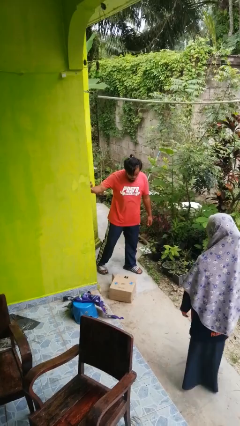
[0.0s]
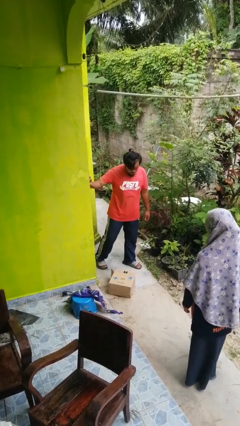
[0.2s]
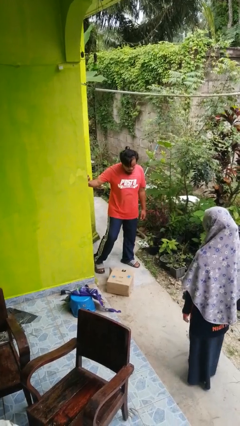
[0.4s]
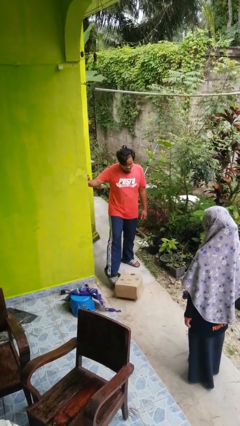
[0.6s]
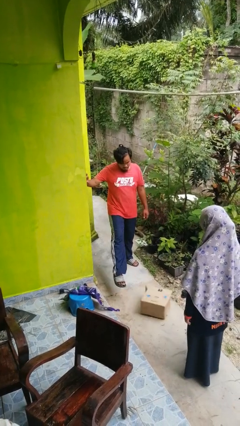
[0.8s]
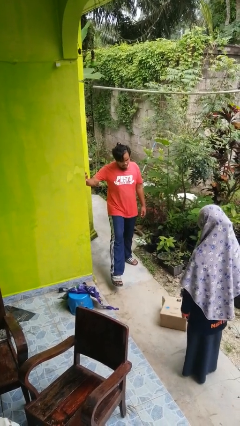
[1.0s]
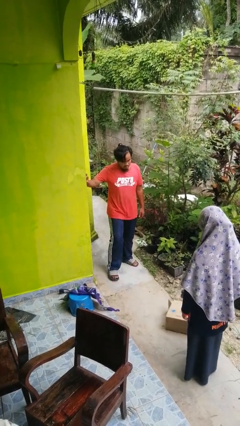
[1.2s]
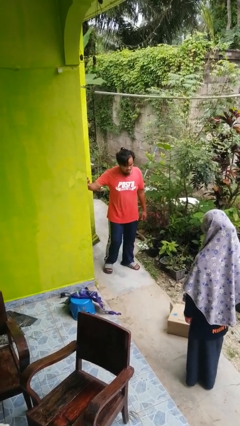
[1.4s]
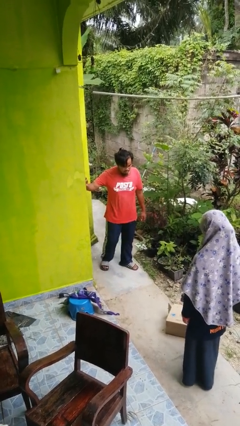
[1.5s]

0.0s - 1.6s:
person kicks object to person

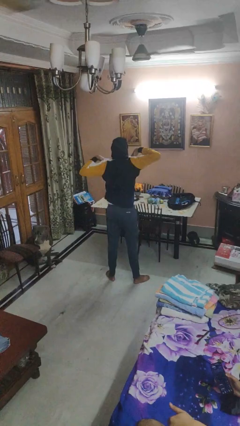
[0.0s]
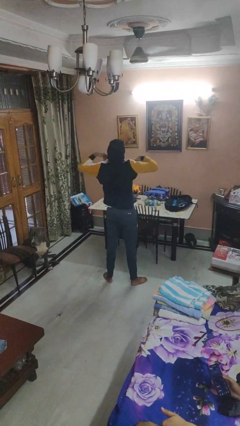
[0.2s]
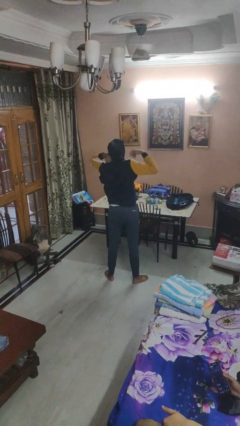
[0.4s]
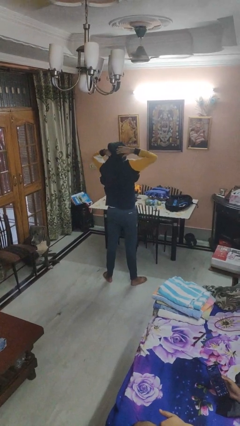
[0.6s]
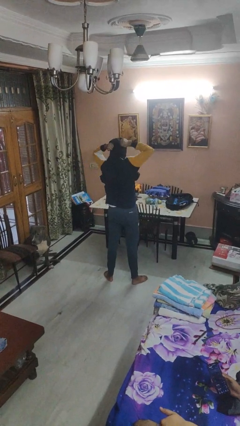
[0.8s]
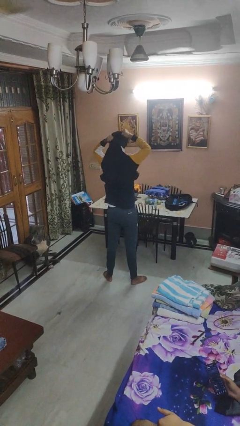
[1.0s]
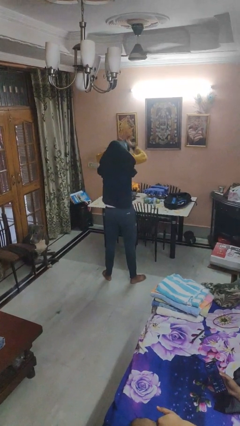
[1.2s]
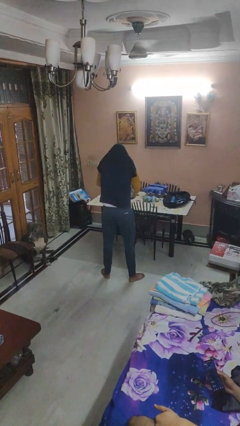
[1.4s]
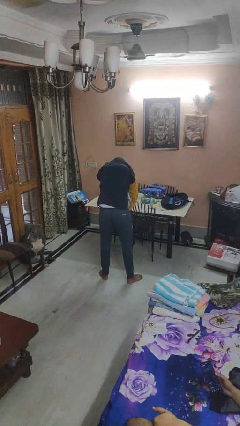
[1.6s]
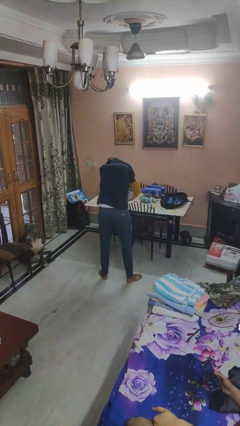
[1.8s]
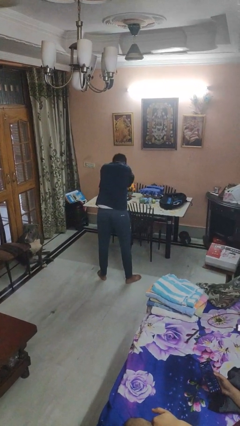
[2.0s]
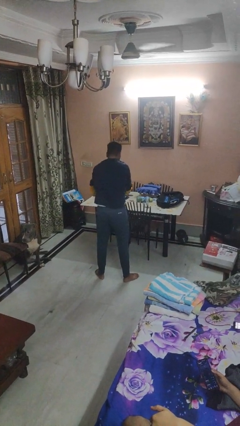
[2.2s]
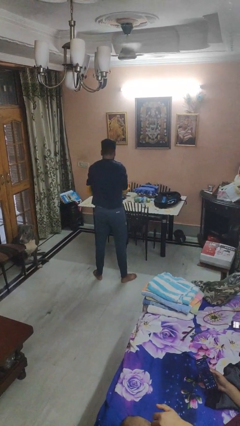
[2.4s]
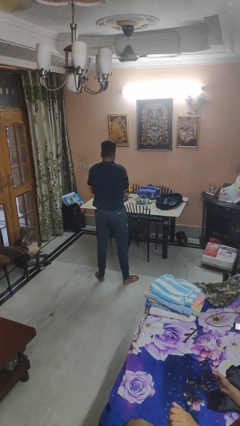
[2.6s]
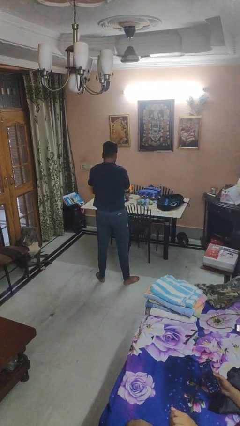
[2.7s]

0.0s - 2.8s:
person takes off hoodie

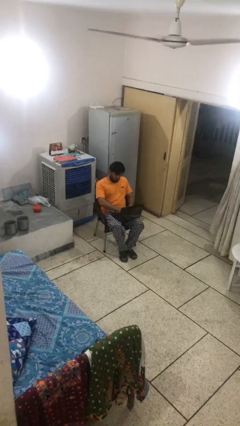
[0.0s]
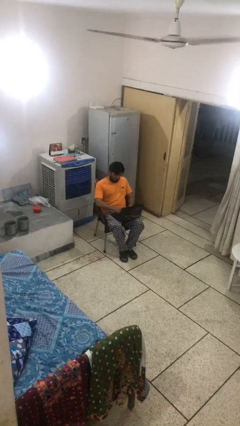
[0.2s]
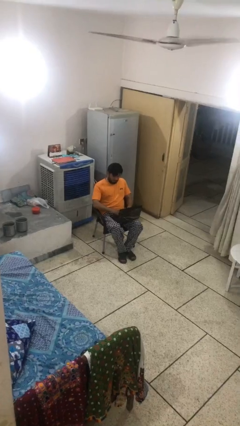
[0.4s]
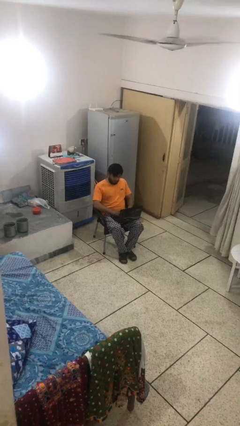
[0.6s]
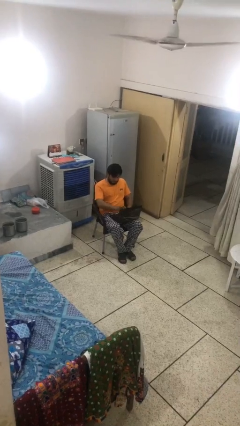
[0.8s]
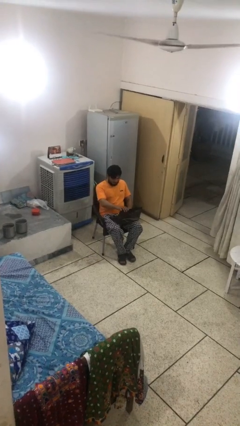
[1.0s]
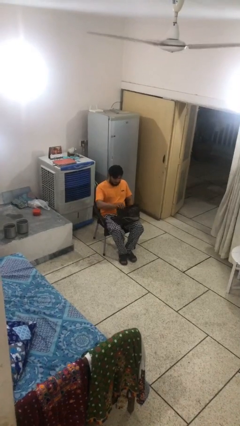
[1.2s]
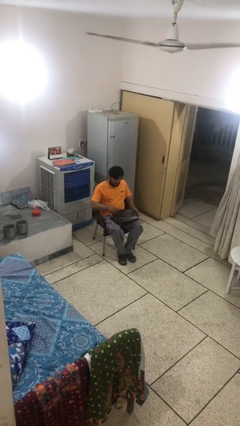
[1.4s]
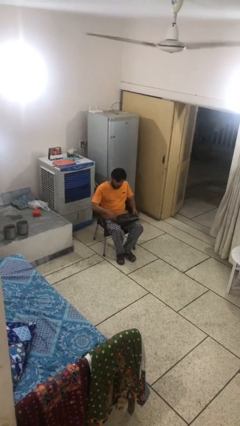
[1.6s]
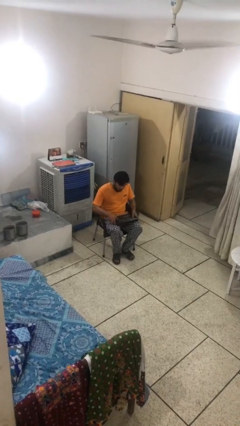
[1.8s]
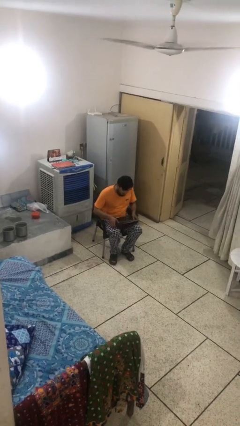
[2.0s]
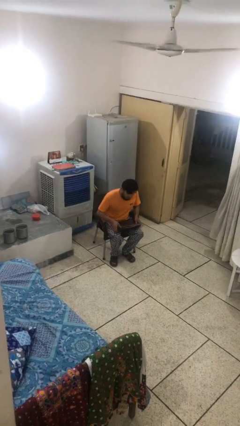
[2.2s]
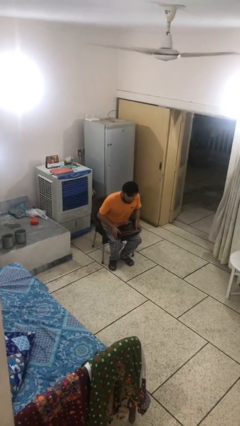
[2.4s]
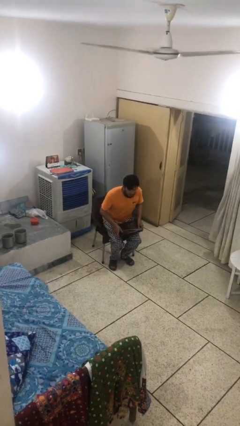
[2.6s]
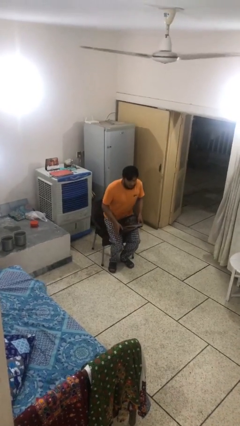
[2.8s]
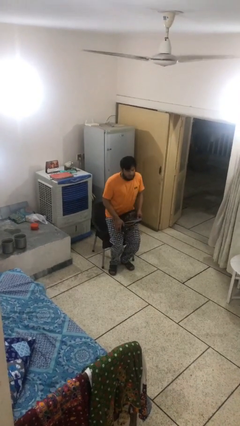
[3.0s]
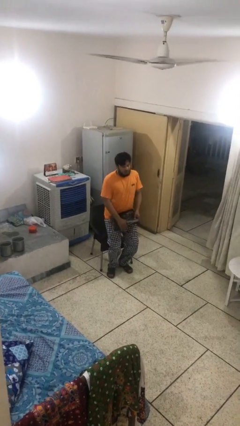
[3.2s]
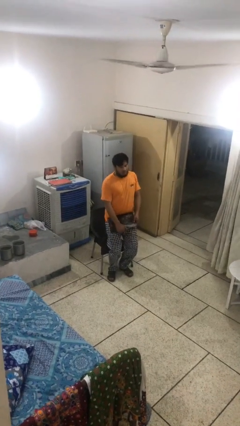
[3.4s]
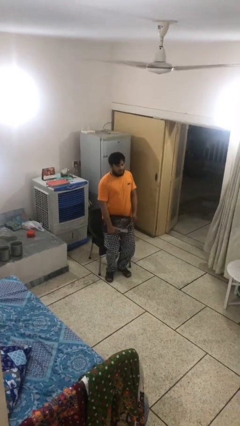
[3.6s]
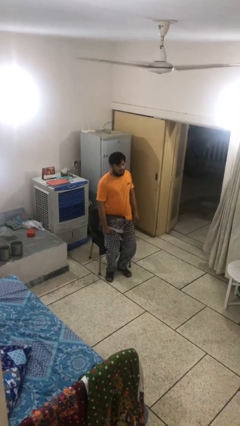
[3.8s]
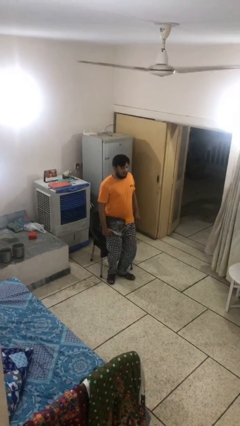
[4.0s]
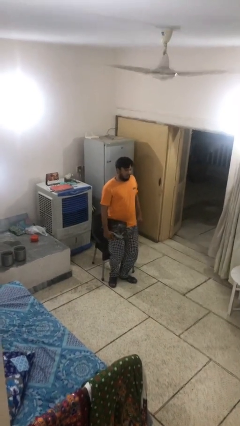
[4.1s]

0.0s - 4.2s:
person stands up

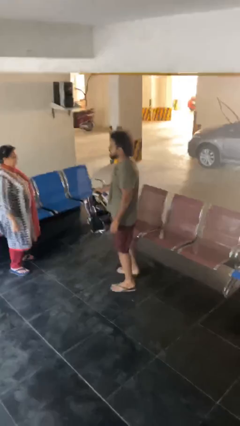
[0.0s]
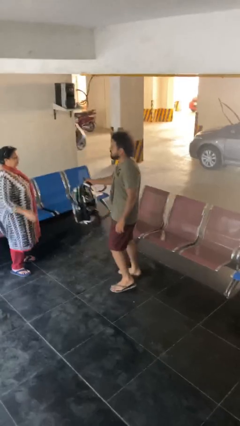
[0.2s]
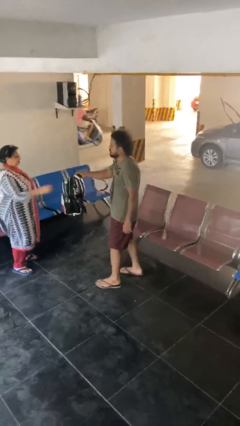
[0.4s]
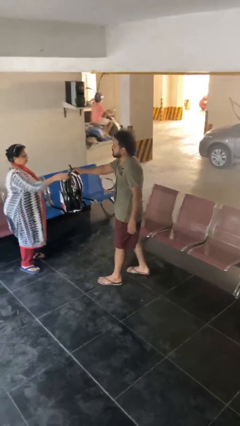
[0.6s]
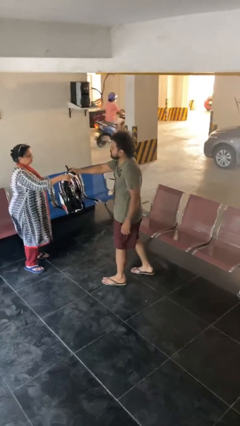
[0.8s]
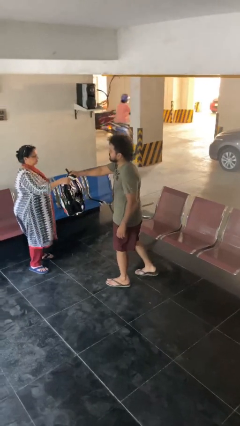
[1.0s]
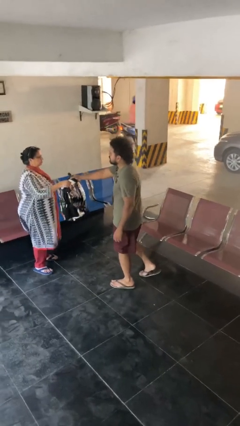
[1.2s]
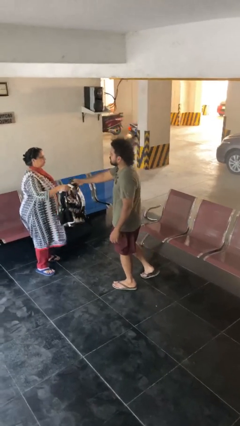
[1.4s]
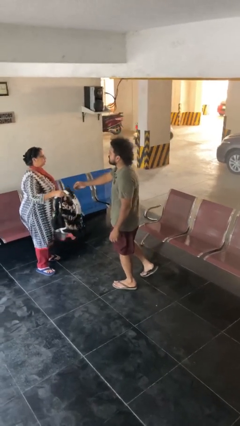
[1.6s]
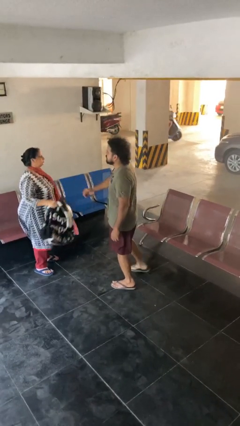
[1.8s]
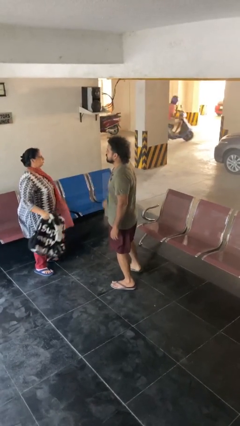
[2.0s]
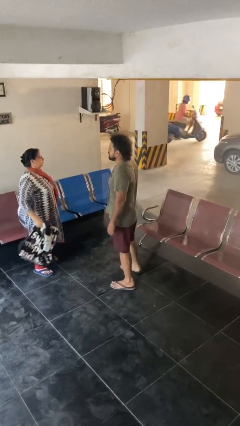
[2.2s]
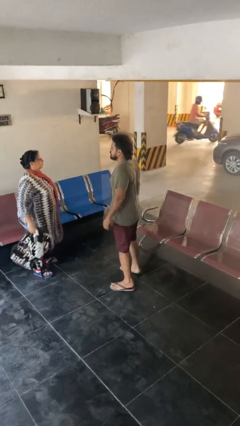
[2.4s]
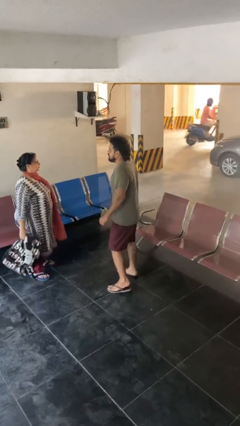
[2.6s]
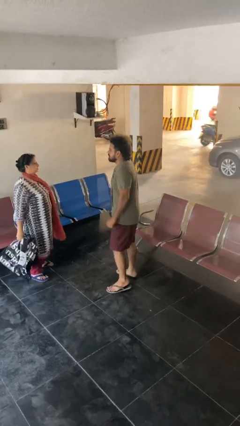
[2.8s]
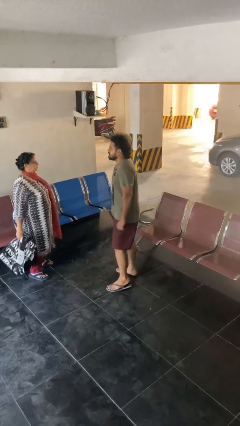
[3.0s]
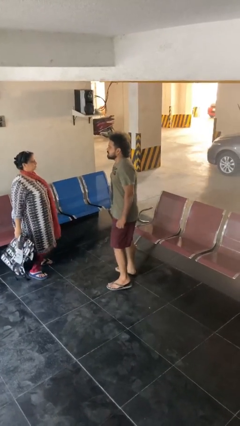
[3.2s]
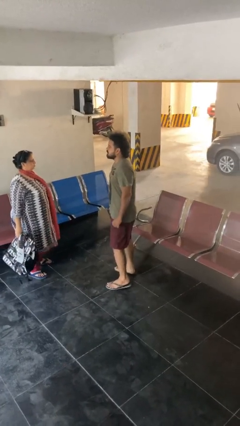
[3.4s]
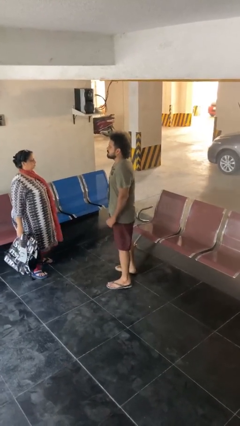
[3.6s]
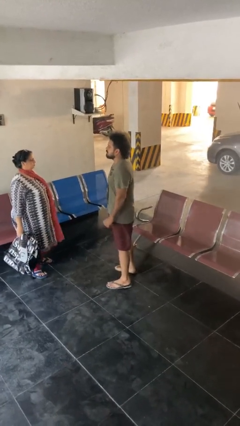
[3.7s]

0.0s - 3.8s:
person transfers object to person

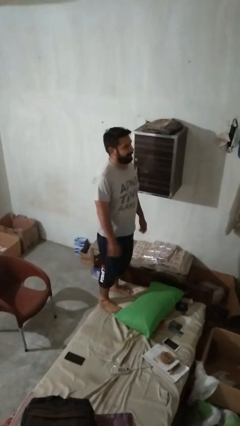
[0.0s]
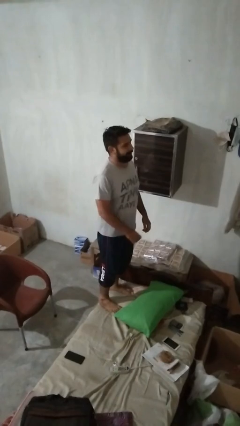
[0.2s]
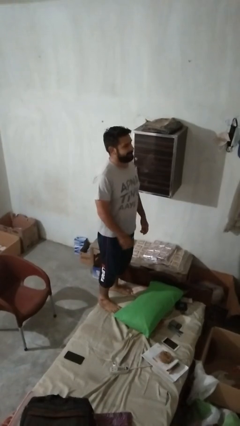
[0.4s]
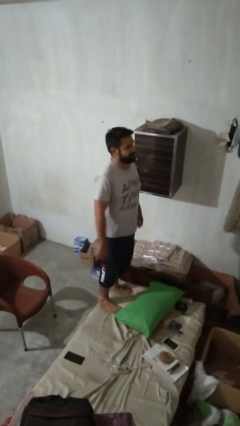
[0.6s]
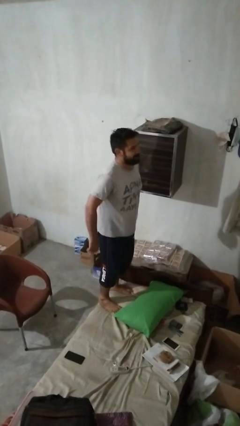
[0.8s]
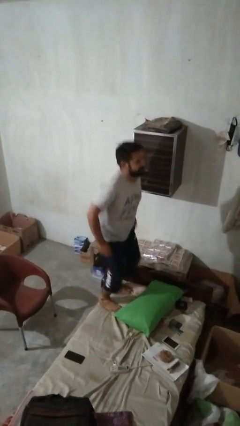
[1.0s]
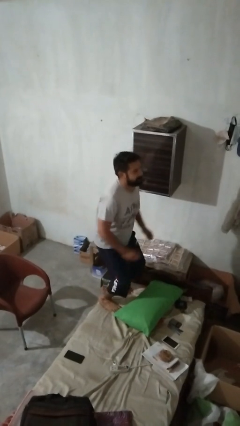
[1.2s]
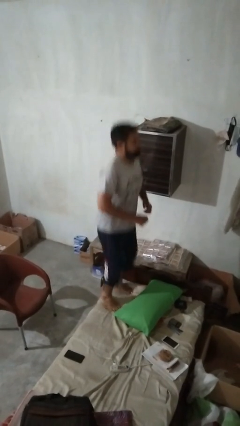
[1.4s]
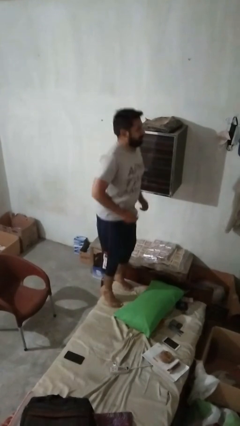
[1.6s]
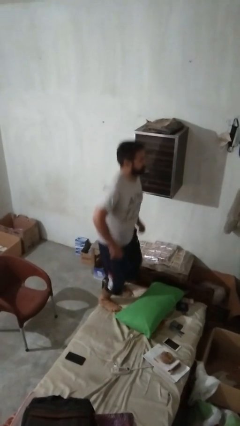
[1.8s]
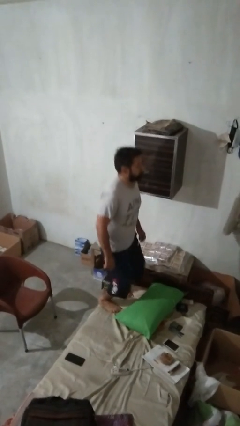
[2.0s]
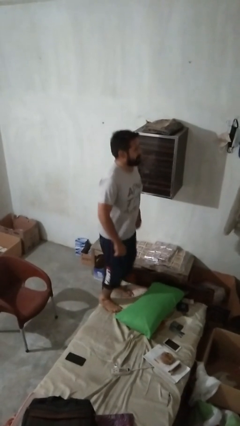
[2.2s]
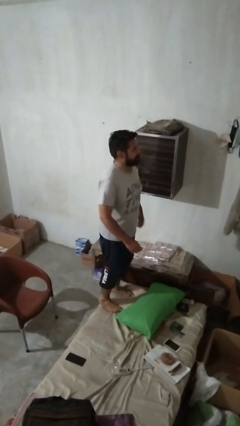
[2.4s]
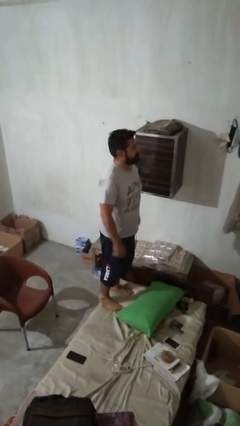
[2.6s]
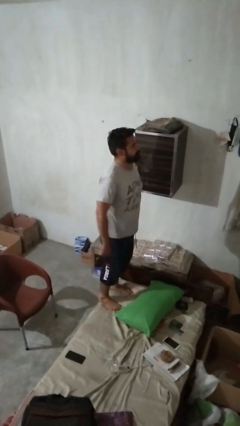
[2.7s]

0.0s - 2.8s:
person jumps on couch

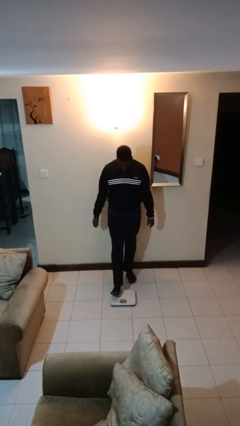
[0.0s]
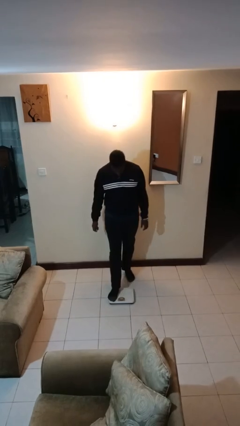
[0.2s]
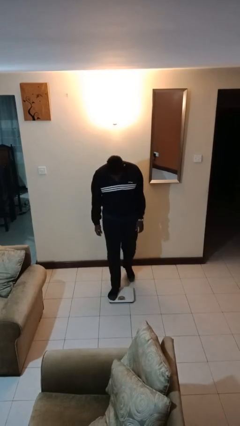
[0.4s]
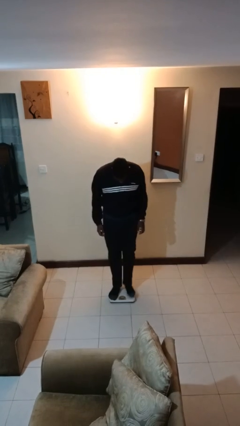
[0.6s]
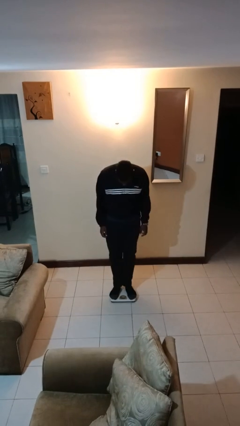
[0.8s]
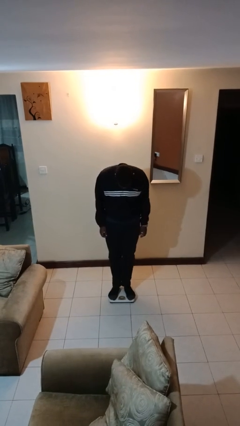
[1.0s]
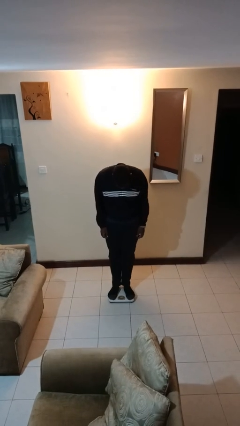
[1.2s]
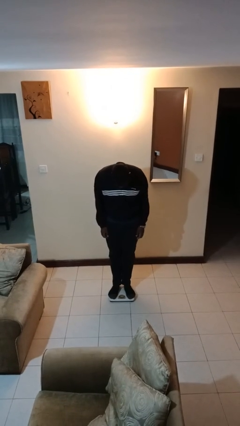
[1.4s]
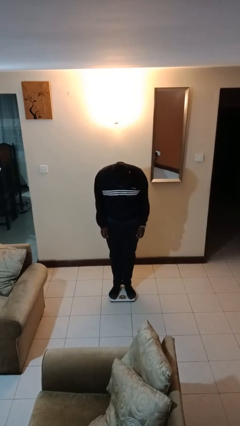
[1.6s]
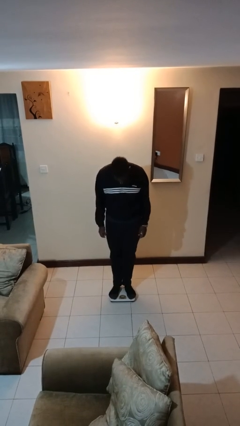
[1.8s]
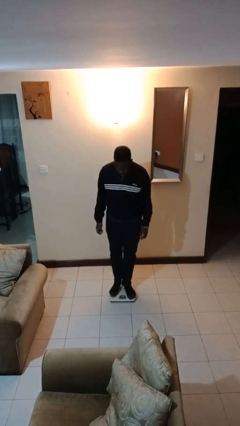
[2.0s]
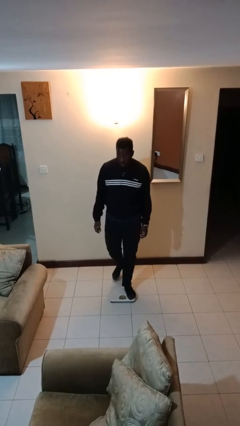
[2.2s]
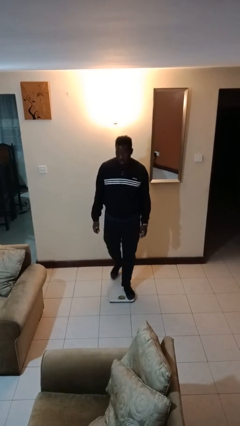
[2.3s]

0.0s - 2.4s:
person uses bodyweight scale

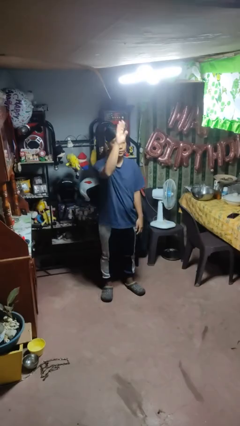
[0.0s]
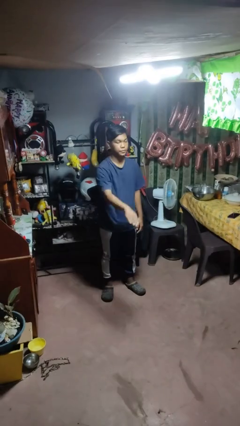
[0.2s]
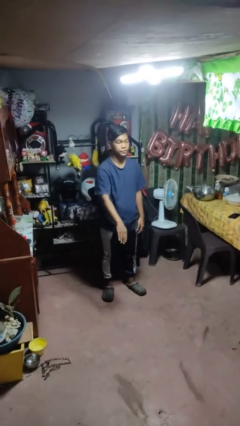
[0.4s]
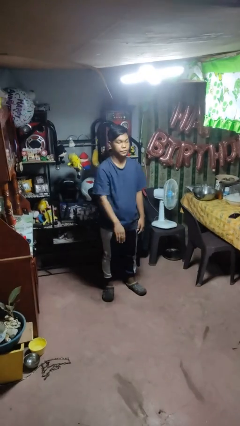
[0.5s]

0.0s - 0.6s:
person gestures swipe down
